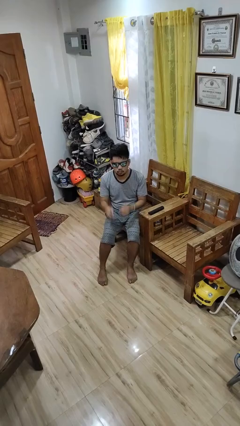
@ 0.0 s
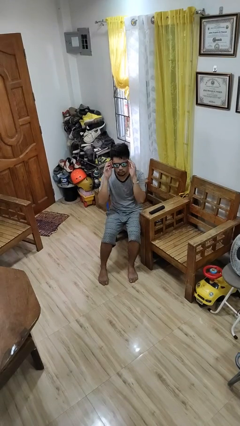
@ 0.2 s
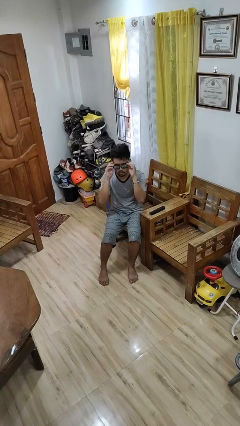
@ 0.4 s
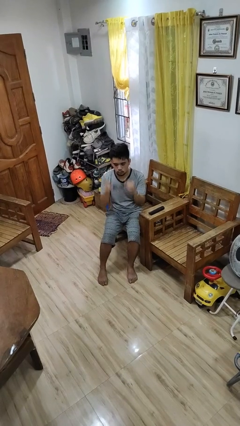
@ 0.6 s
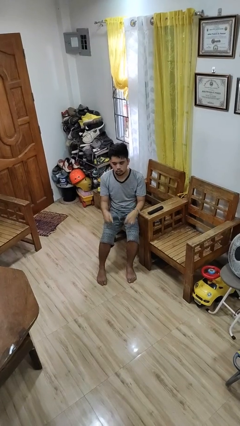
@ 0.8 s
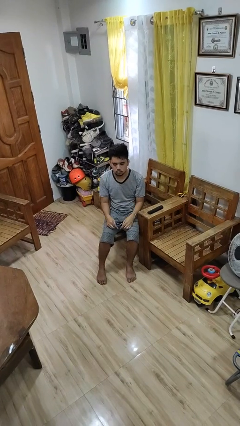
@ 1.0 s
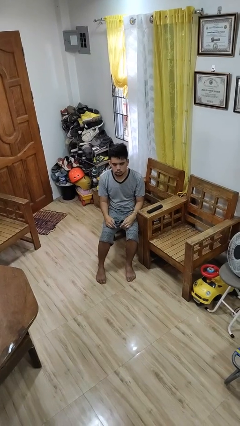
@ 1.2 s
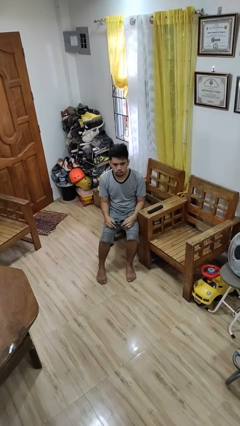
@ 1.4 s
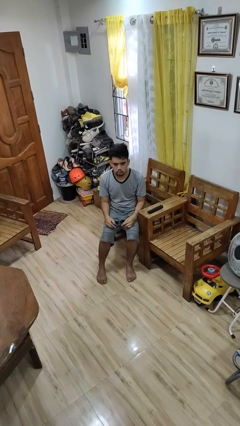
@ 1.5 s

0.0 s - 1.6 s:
person takes off sunglasses

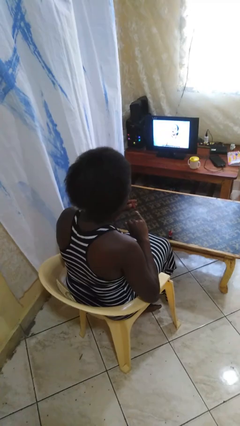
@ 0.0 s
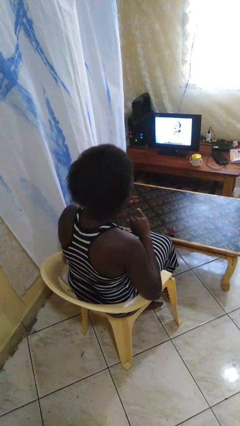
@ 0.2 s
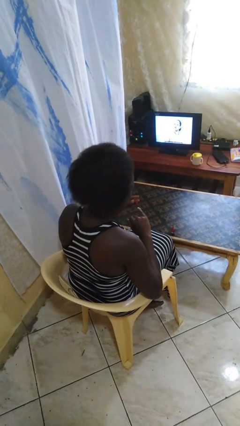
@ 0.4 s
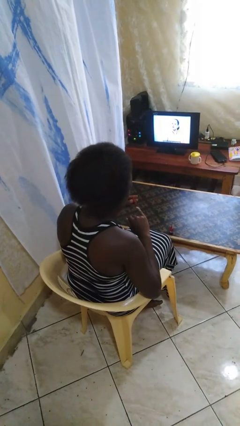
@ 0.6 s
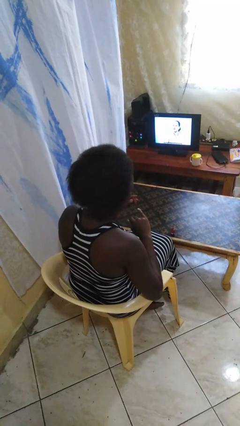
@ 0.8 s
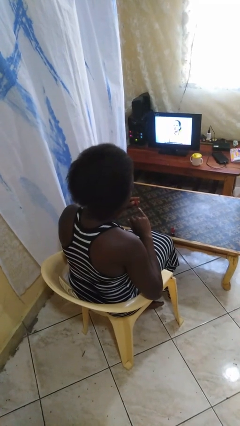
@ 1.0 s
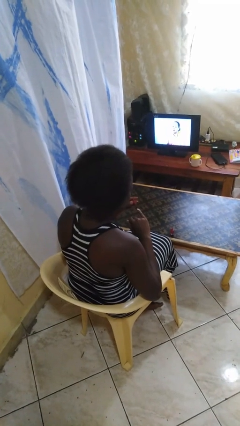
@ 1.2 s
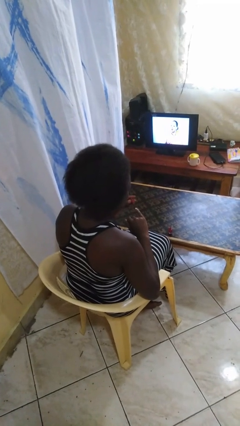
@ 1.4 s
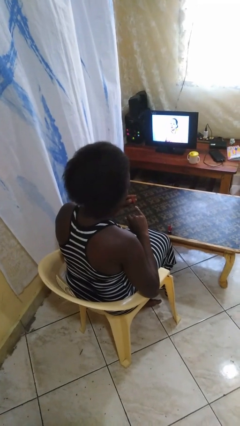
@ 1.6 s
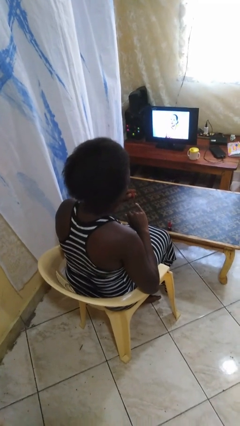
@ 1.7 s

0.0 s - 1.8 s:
person paints fingernails

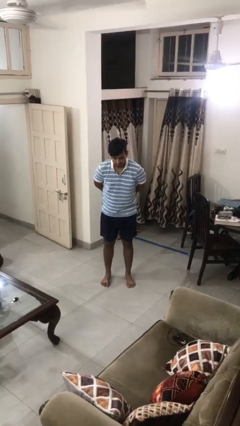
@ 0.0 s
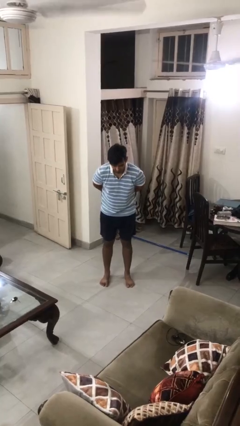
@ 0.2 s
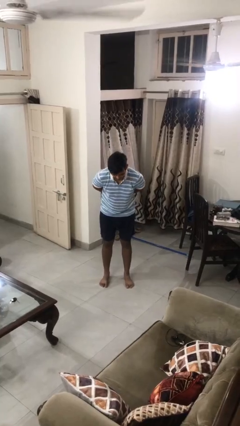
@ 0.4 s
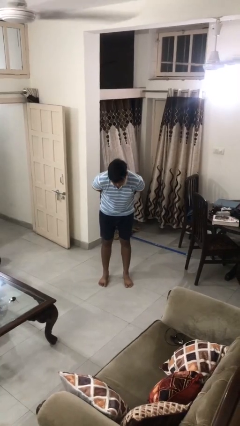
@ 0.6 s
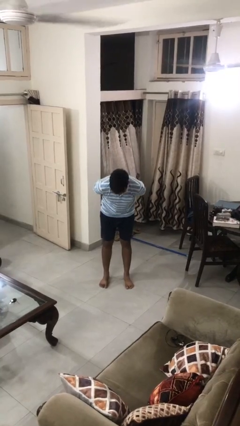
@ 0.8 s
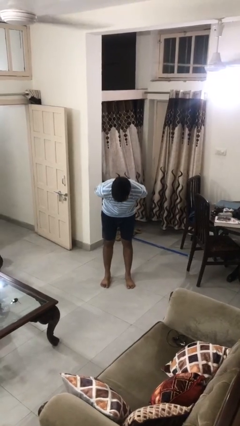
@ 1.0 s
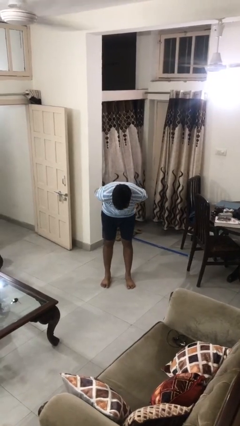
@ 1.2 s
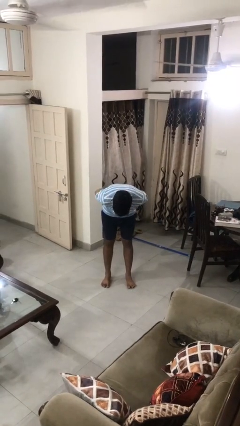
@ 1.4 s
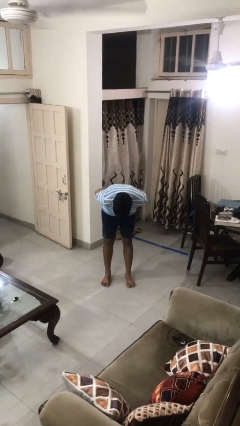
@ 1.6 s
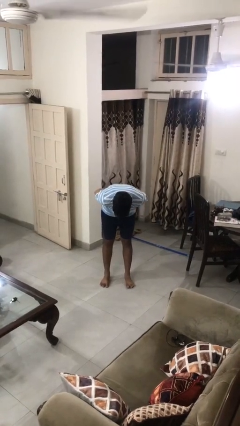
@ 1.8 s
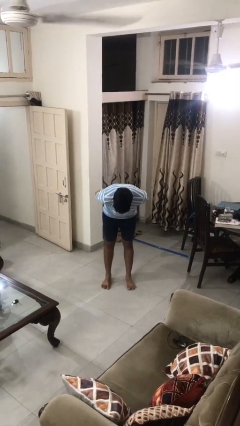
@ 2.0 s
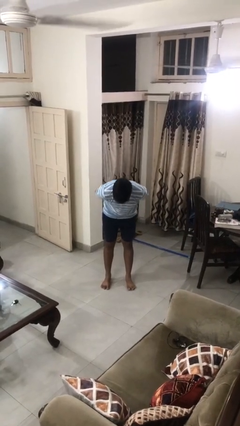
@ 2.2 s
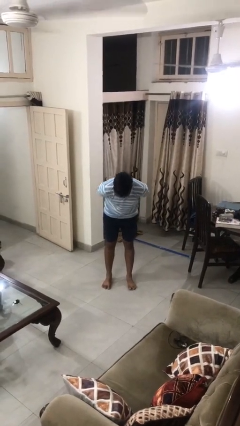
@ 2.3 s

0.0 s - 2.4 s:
person bows

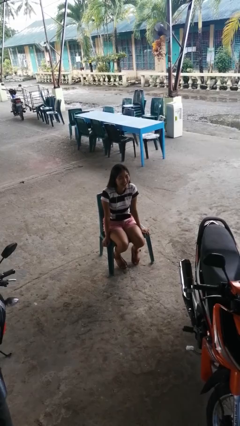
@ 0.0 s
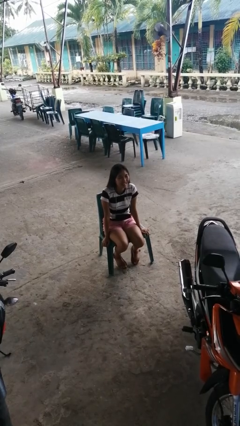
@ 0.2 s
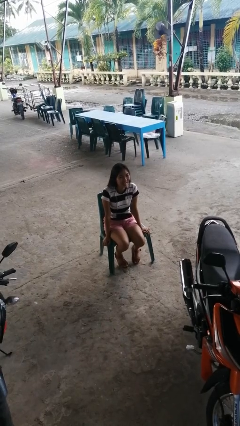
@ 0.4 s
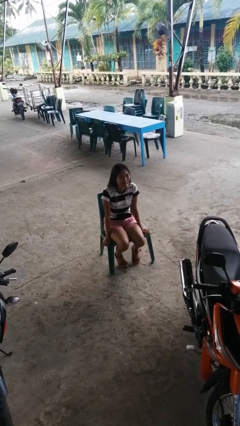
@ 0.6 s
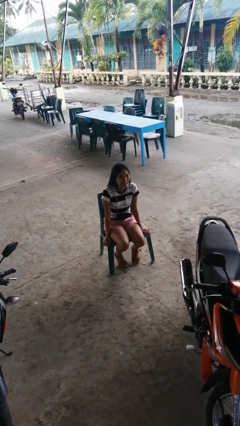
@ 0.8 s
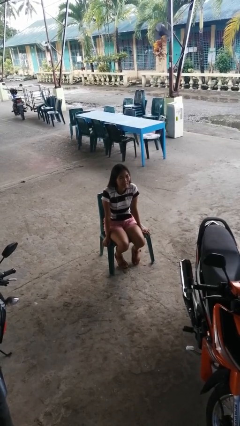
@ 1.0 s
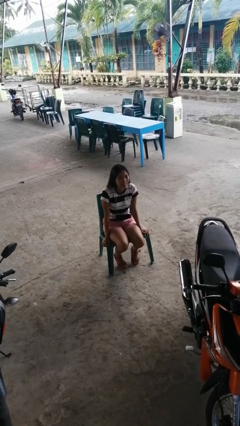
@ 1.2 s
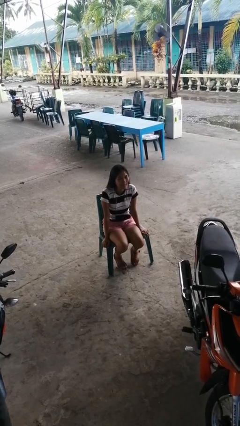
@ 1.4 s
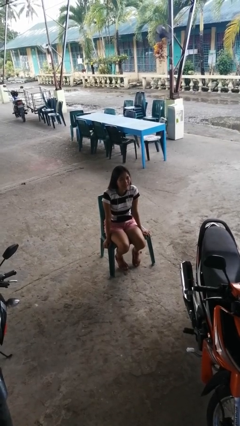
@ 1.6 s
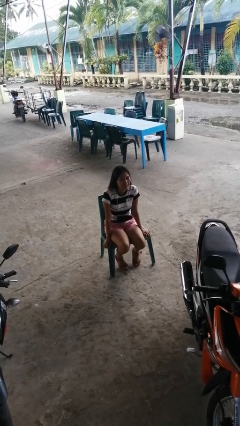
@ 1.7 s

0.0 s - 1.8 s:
person sticks out tongue

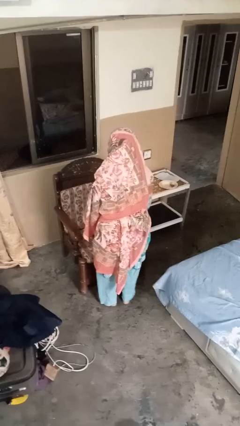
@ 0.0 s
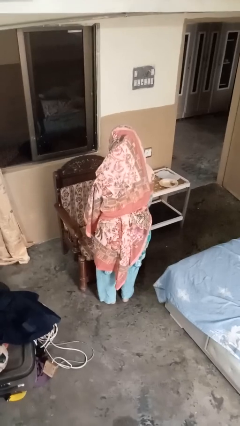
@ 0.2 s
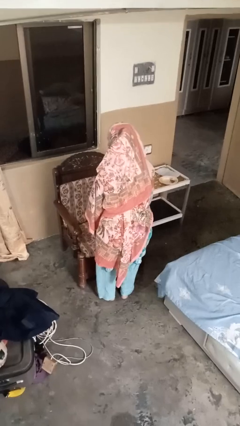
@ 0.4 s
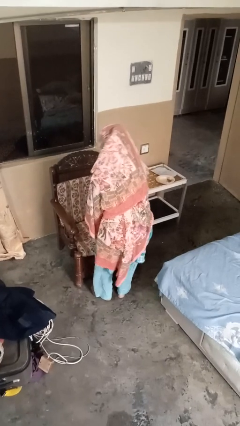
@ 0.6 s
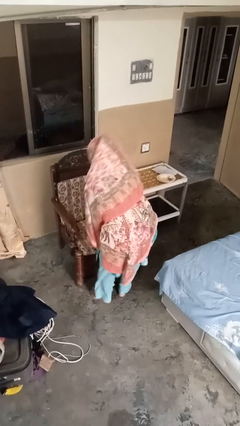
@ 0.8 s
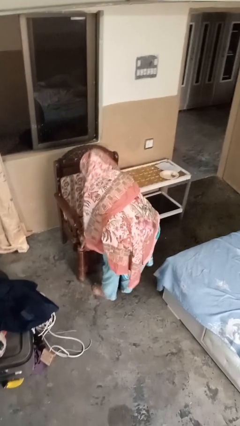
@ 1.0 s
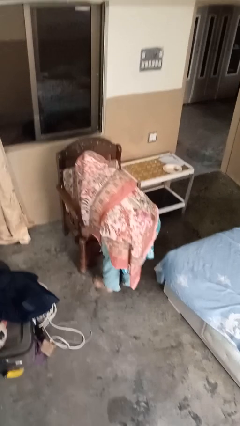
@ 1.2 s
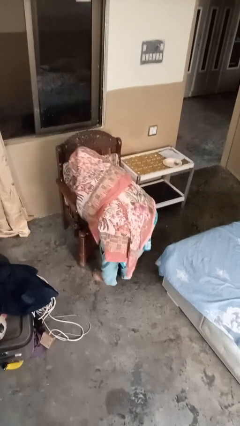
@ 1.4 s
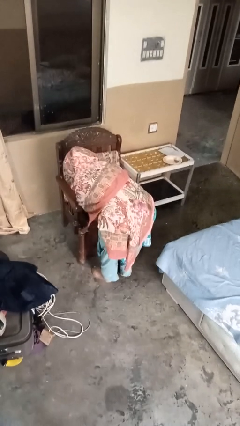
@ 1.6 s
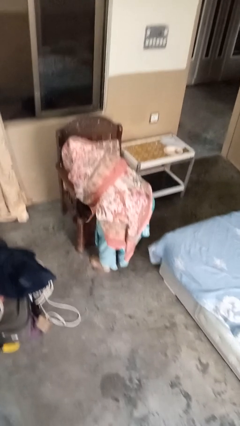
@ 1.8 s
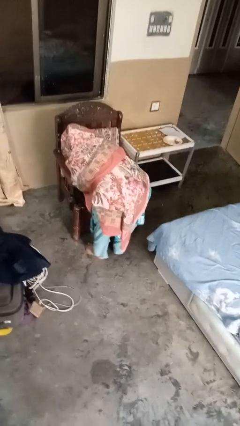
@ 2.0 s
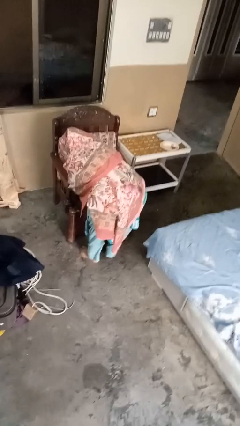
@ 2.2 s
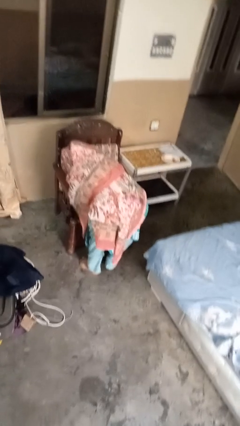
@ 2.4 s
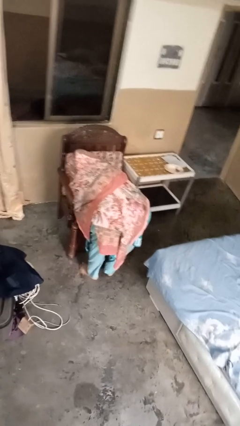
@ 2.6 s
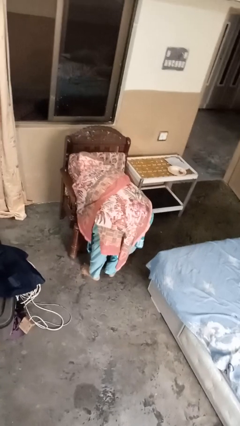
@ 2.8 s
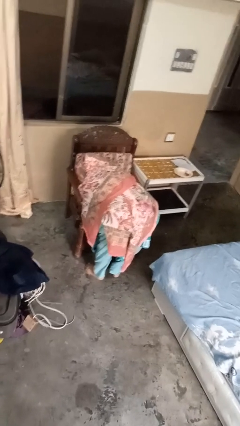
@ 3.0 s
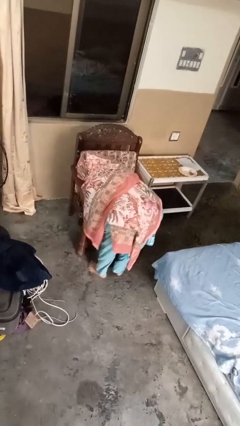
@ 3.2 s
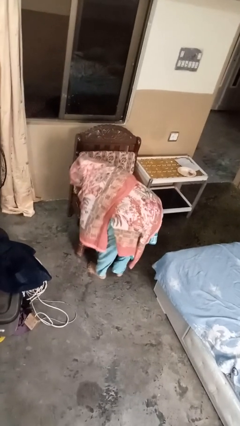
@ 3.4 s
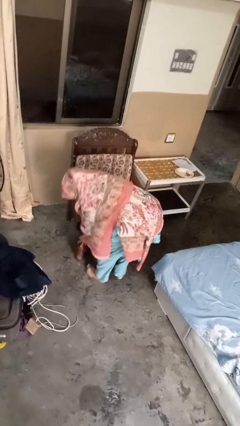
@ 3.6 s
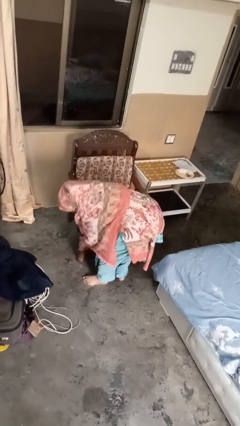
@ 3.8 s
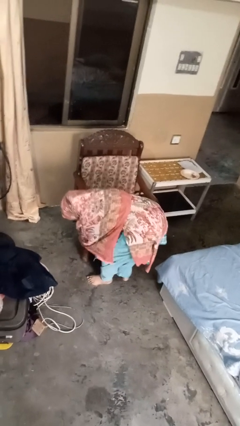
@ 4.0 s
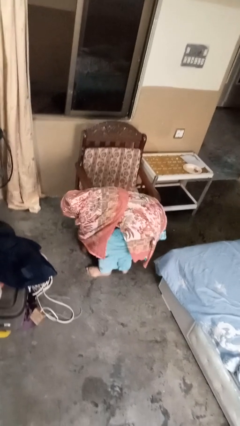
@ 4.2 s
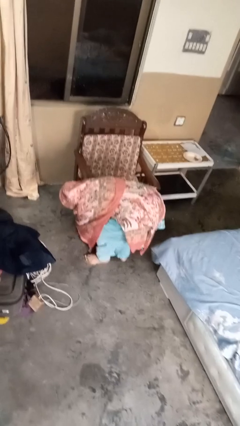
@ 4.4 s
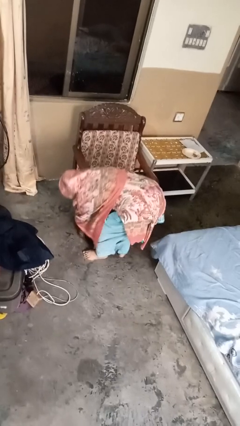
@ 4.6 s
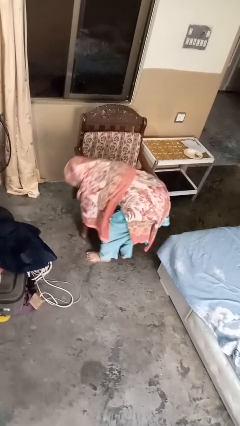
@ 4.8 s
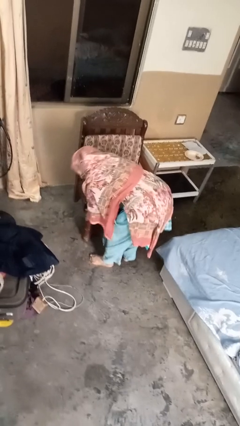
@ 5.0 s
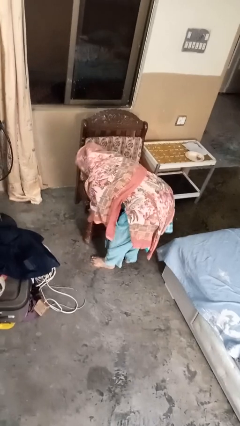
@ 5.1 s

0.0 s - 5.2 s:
person searches under couch

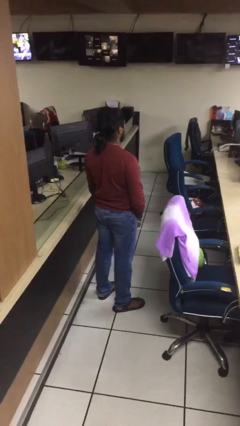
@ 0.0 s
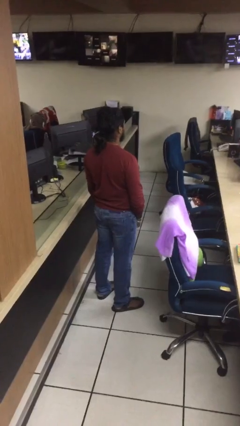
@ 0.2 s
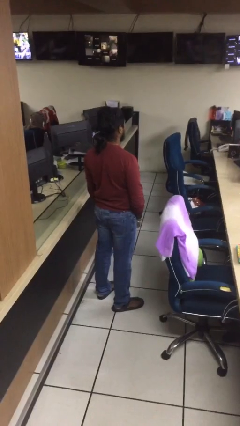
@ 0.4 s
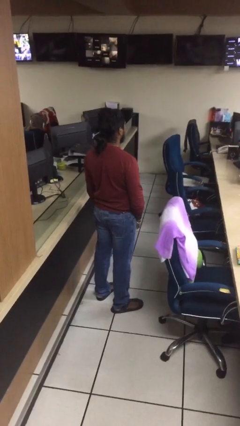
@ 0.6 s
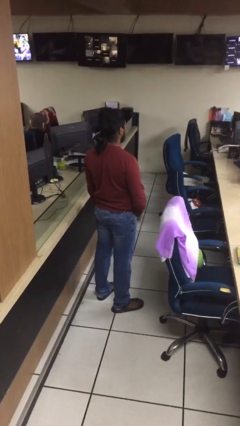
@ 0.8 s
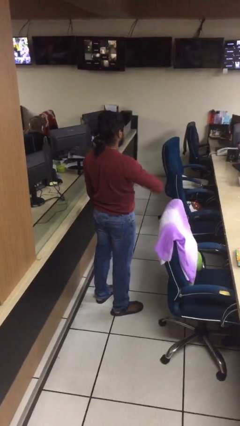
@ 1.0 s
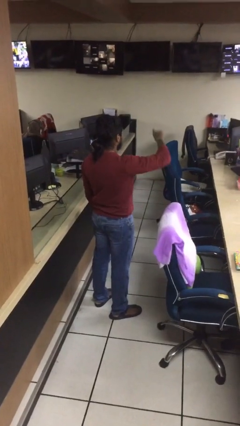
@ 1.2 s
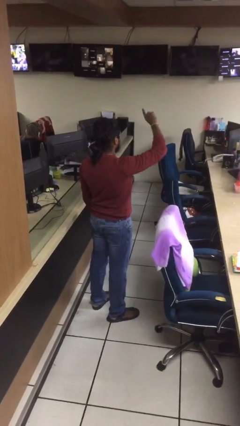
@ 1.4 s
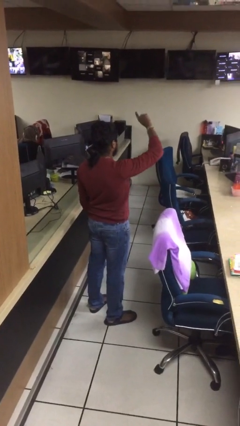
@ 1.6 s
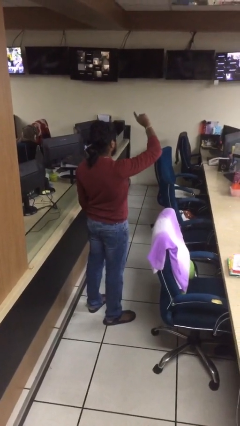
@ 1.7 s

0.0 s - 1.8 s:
person gestures swipe up

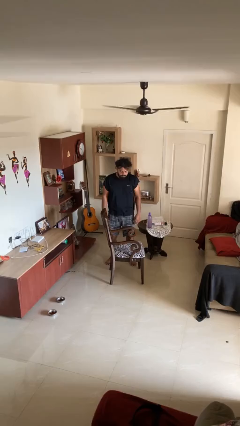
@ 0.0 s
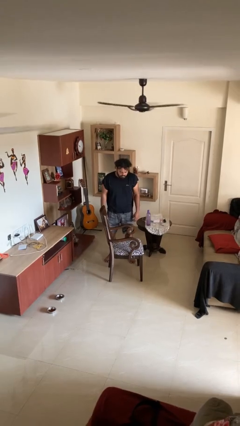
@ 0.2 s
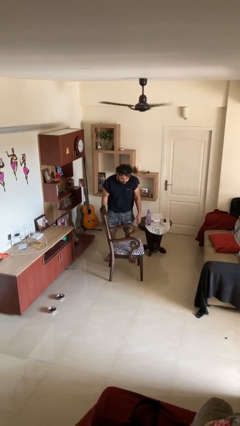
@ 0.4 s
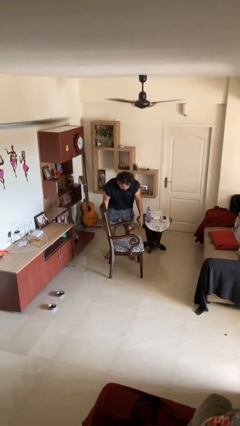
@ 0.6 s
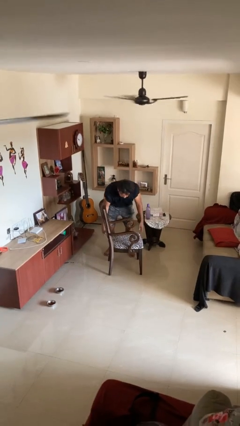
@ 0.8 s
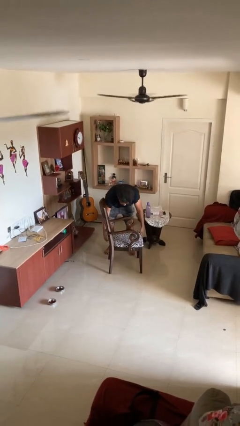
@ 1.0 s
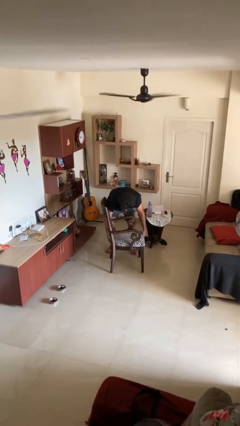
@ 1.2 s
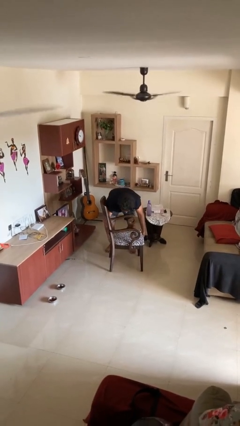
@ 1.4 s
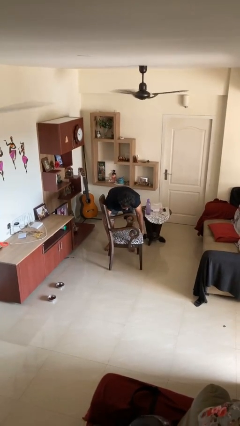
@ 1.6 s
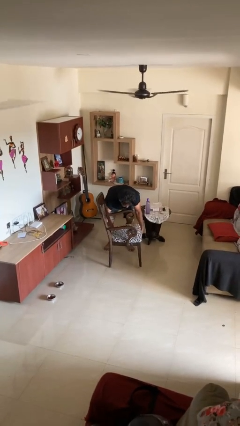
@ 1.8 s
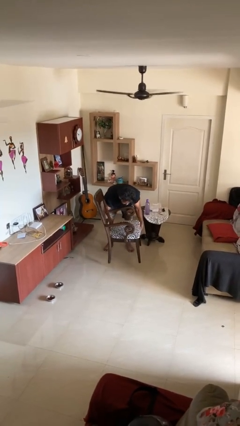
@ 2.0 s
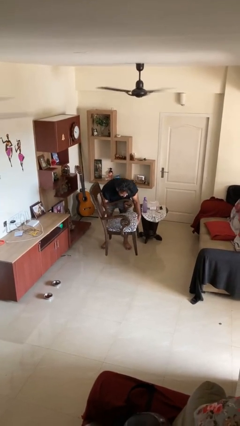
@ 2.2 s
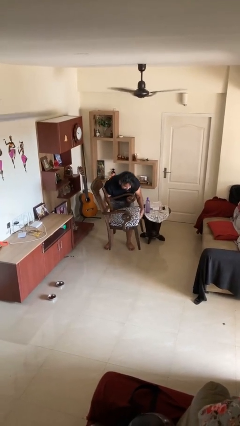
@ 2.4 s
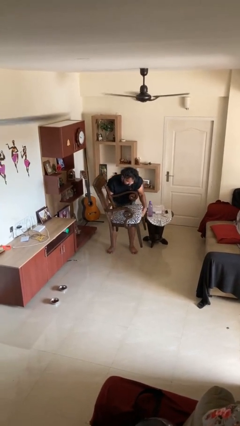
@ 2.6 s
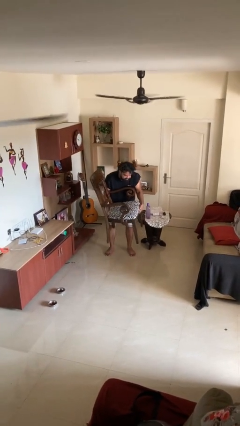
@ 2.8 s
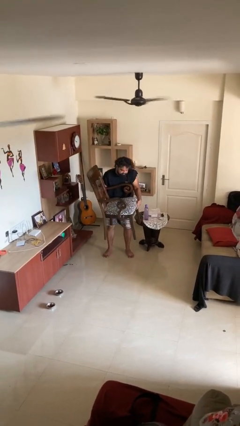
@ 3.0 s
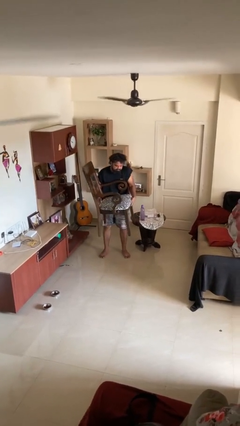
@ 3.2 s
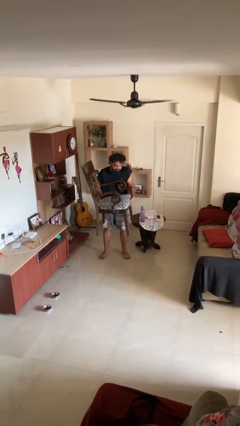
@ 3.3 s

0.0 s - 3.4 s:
person picks up object from floor
